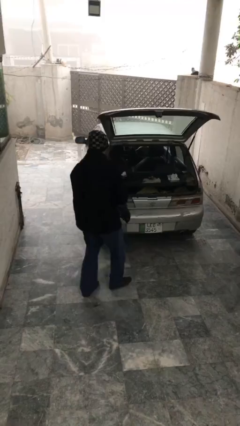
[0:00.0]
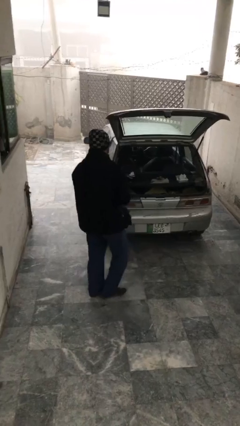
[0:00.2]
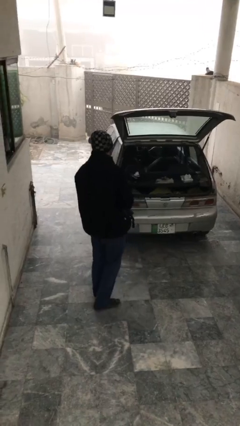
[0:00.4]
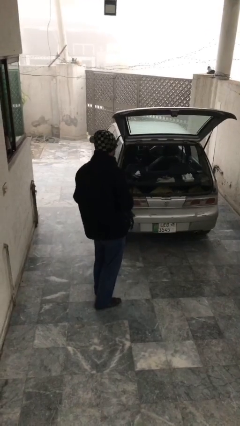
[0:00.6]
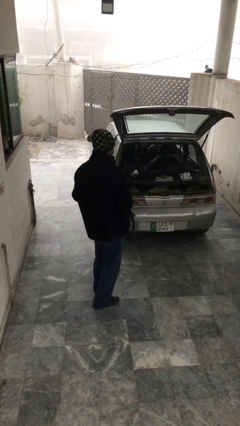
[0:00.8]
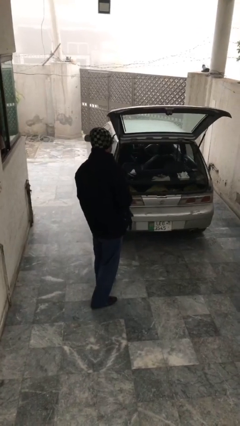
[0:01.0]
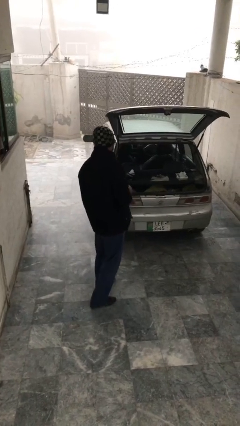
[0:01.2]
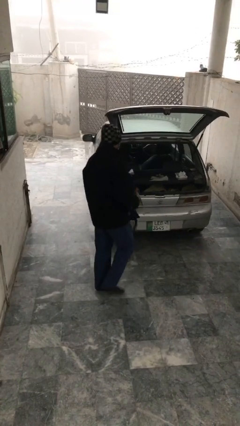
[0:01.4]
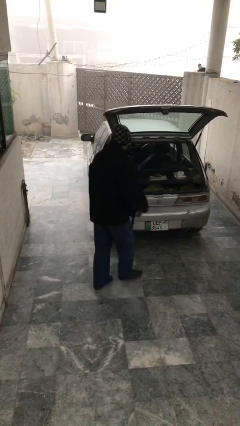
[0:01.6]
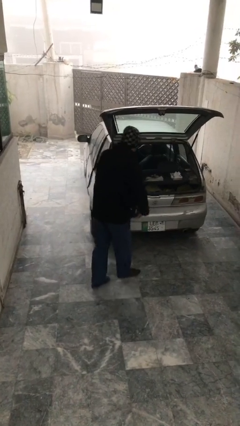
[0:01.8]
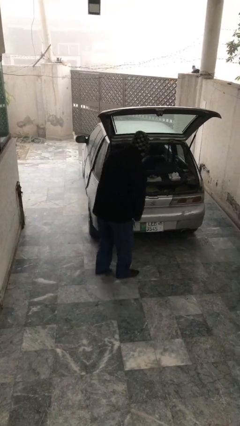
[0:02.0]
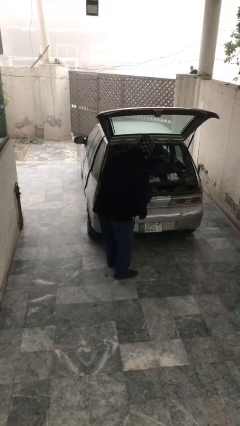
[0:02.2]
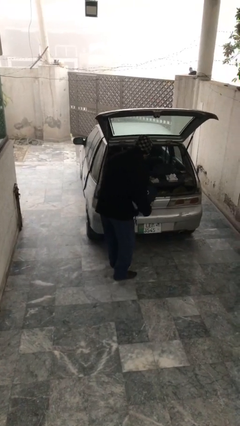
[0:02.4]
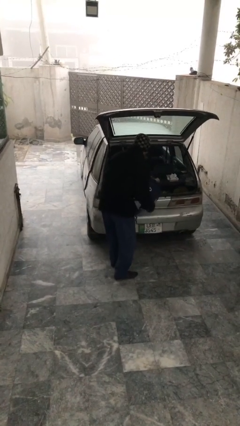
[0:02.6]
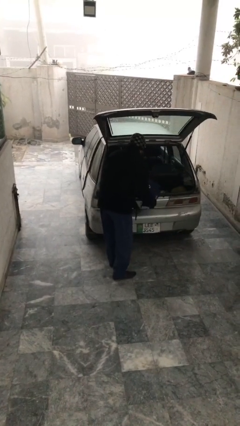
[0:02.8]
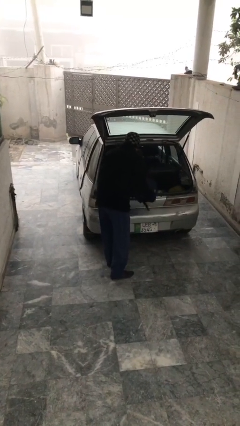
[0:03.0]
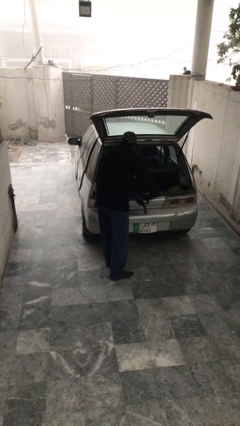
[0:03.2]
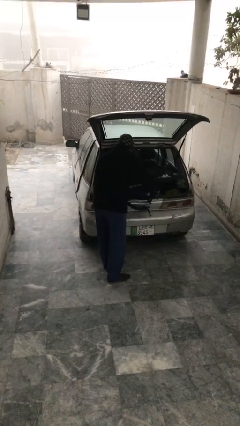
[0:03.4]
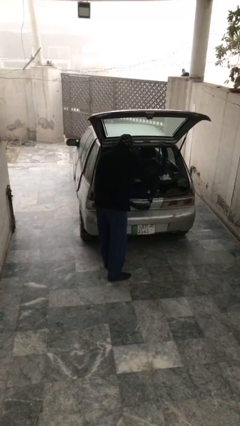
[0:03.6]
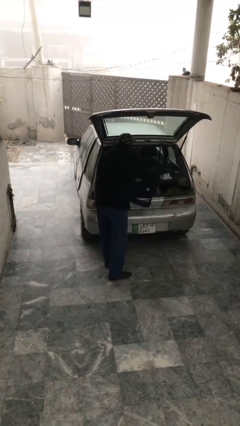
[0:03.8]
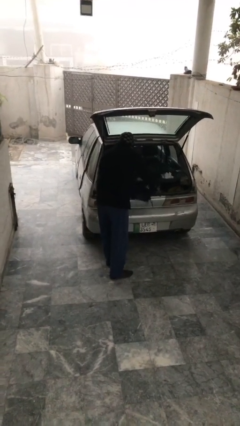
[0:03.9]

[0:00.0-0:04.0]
person loads car

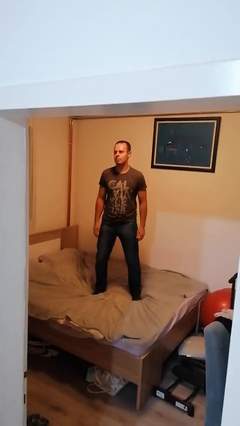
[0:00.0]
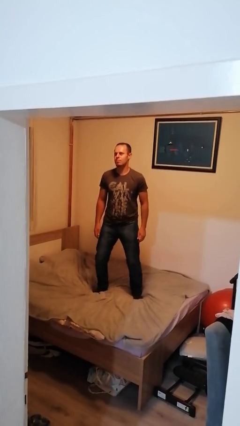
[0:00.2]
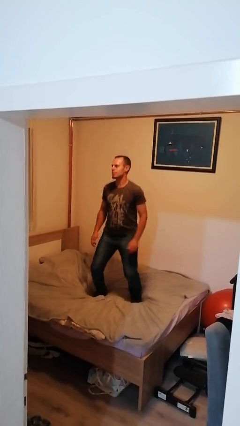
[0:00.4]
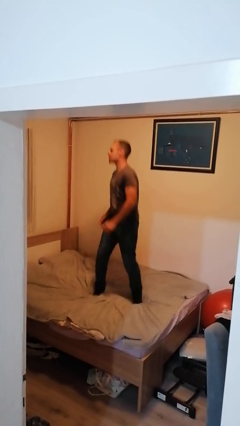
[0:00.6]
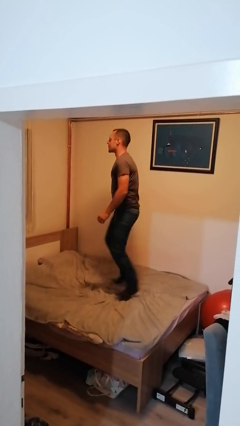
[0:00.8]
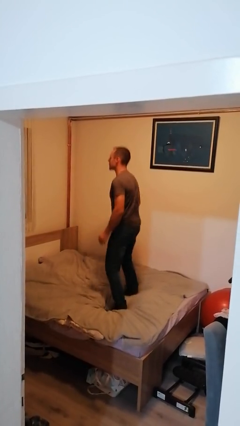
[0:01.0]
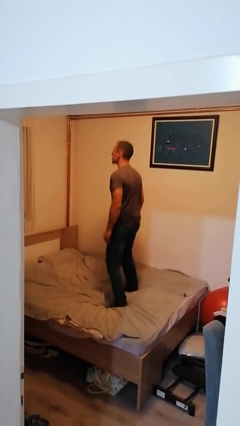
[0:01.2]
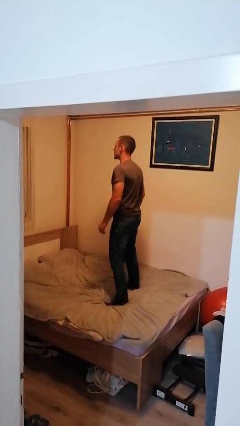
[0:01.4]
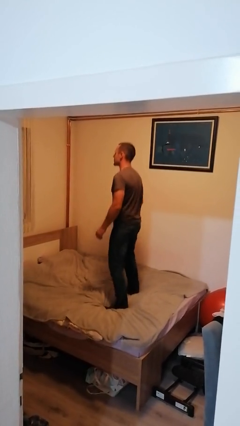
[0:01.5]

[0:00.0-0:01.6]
person jumps on bed

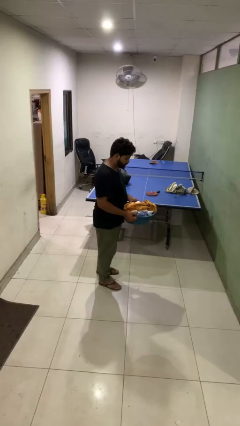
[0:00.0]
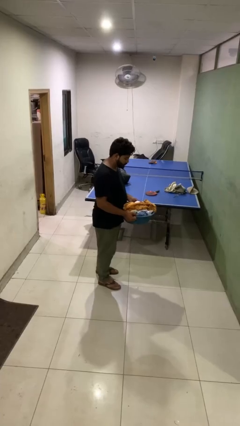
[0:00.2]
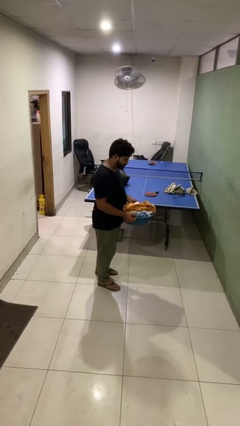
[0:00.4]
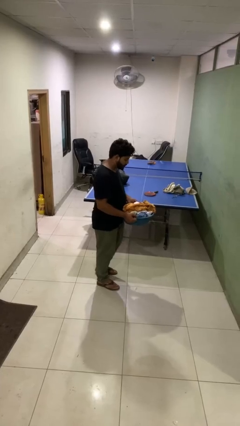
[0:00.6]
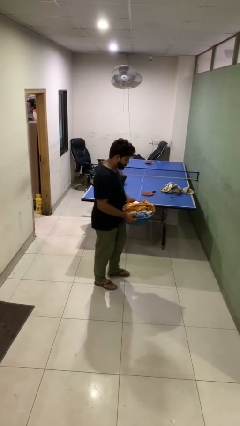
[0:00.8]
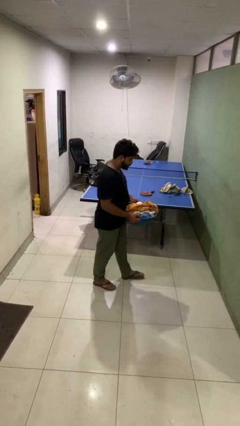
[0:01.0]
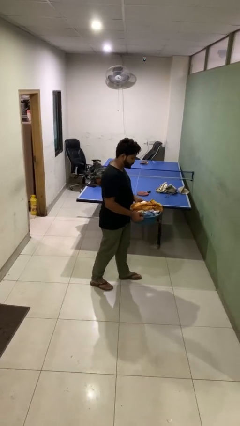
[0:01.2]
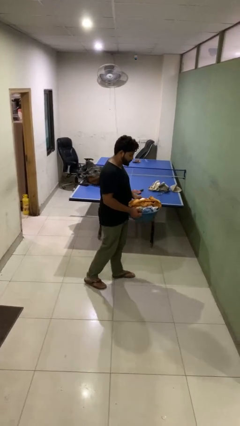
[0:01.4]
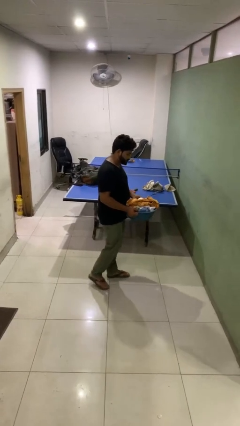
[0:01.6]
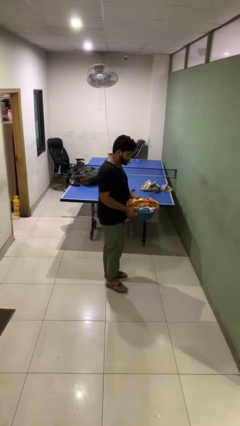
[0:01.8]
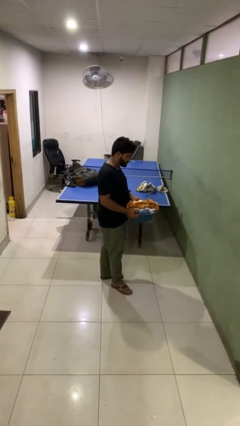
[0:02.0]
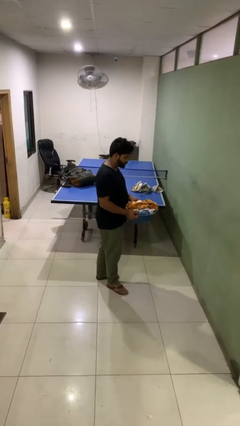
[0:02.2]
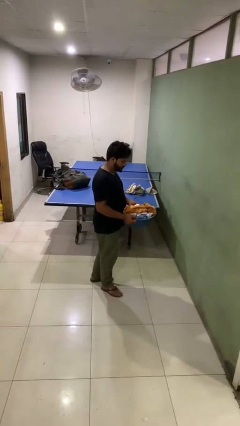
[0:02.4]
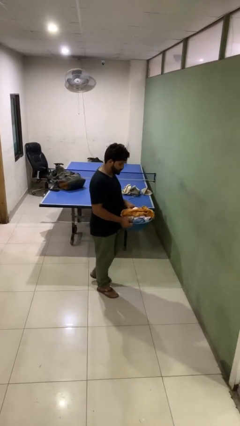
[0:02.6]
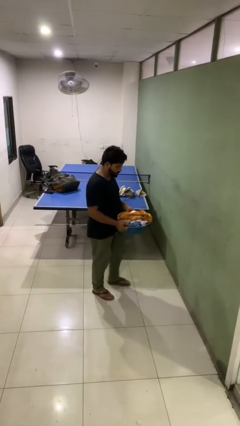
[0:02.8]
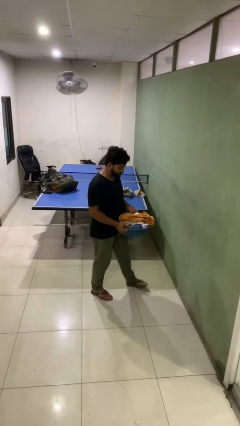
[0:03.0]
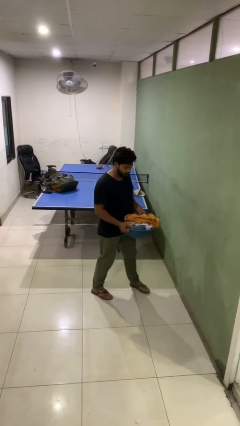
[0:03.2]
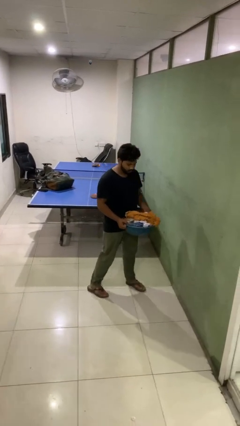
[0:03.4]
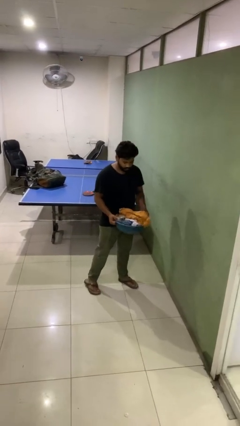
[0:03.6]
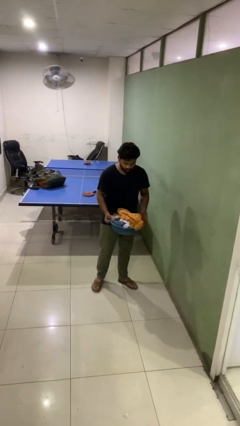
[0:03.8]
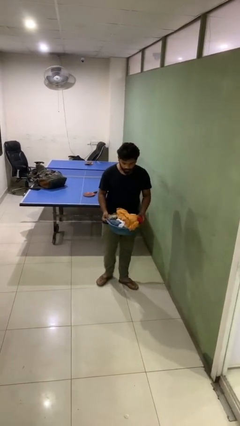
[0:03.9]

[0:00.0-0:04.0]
person carries laundry basket

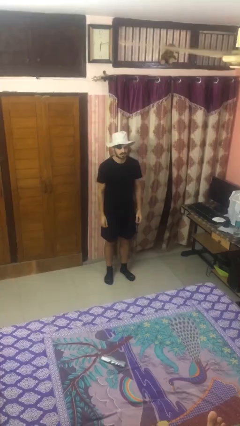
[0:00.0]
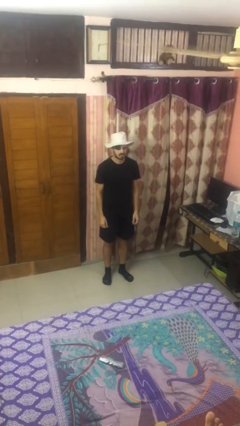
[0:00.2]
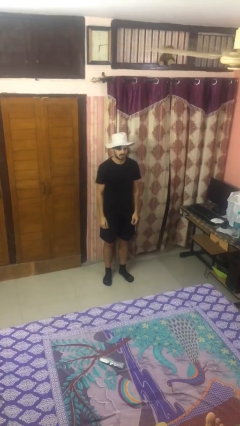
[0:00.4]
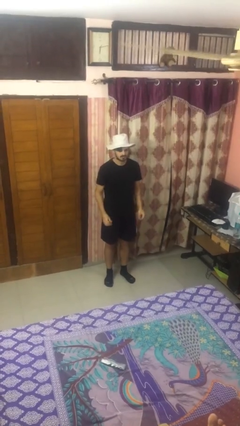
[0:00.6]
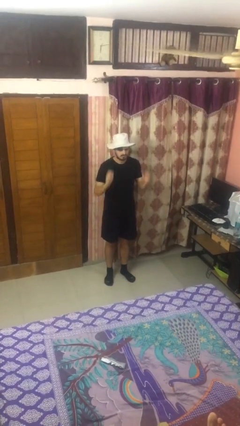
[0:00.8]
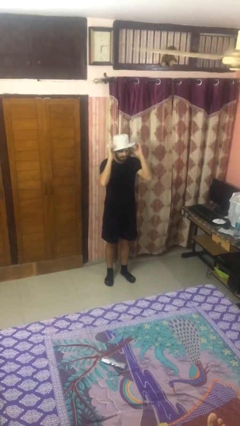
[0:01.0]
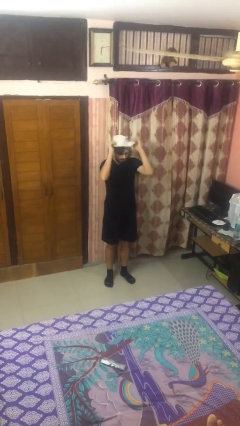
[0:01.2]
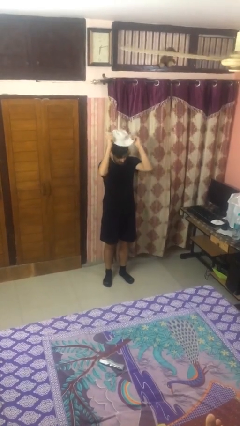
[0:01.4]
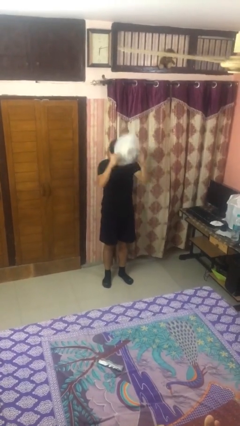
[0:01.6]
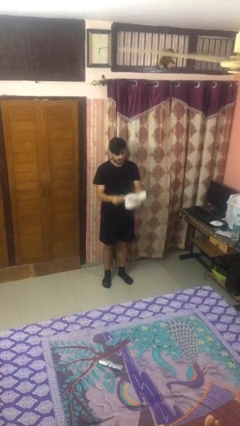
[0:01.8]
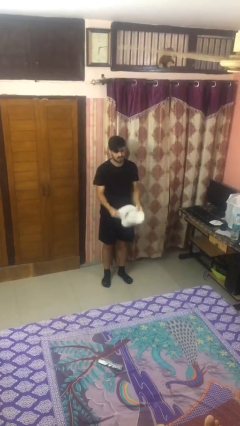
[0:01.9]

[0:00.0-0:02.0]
person takes off hat

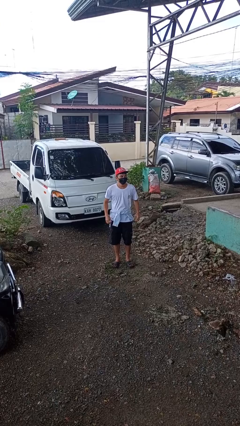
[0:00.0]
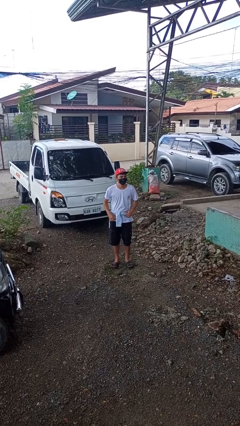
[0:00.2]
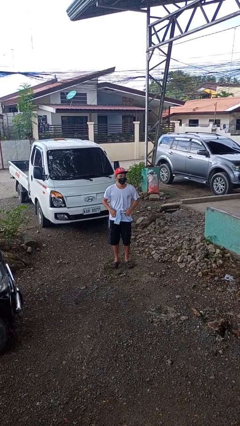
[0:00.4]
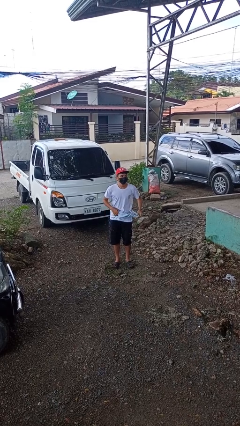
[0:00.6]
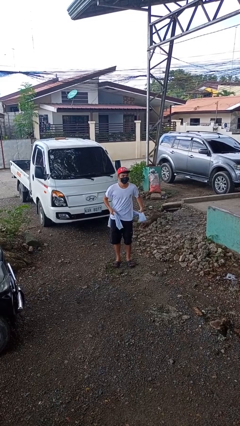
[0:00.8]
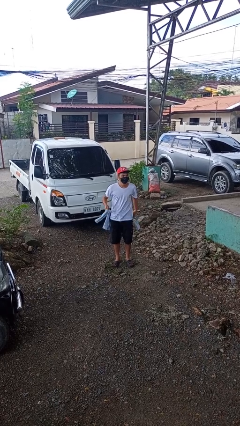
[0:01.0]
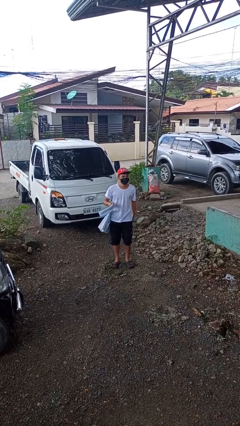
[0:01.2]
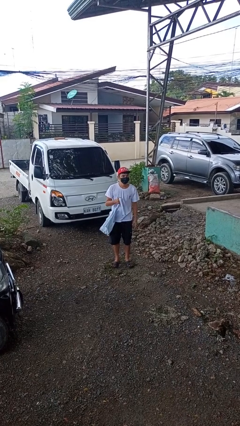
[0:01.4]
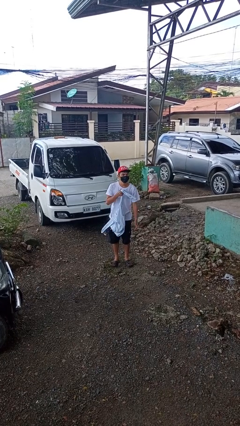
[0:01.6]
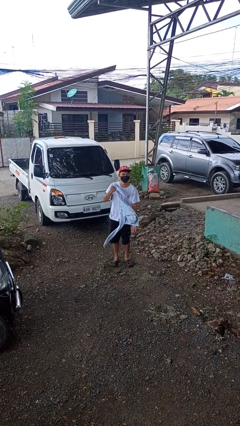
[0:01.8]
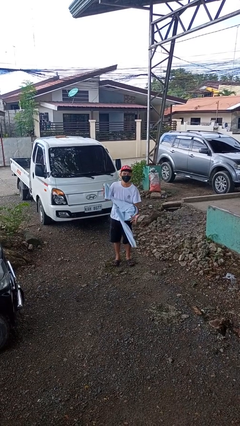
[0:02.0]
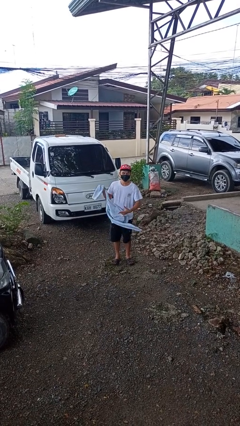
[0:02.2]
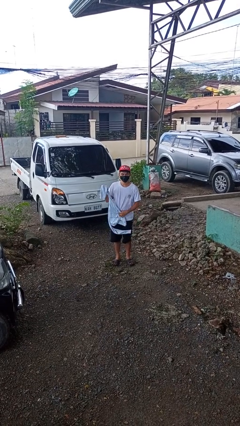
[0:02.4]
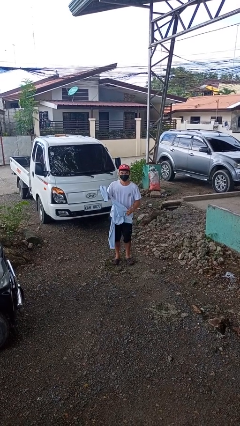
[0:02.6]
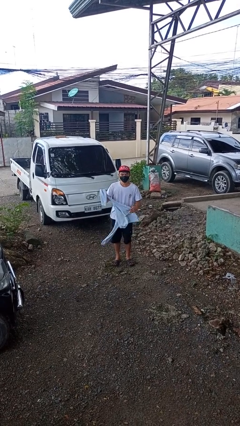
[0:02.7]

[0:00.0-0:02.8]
person unties jacket around waist

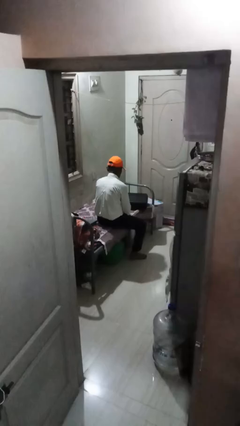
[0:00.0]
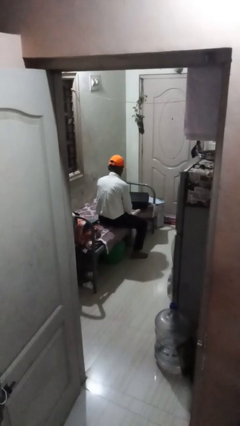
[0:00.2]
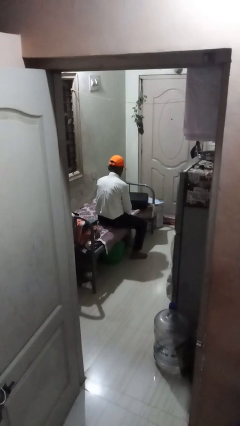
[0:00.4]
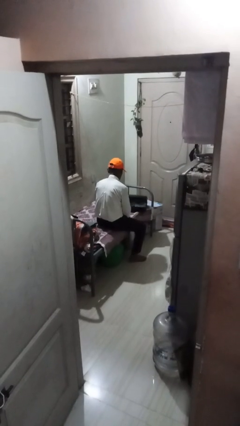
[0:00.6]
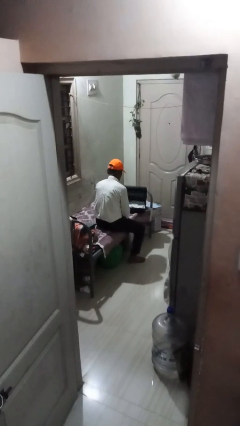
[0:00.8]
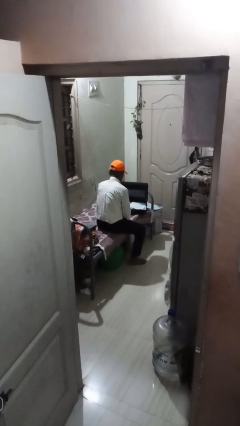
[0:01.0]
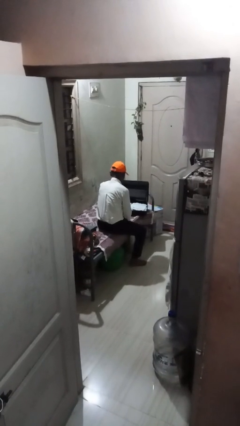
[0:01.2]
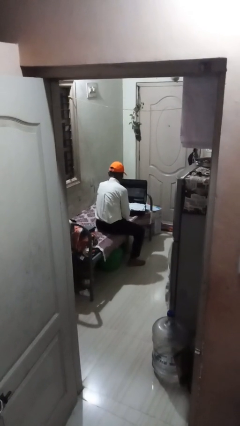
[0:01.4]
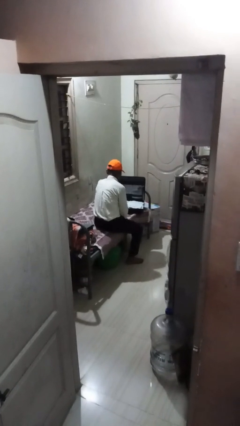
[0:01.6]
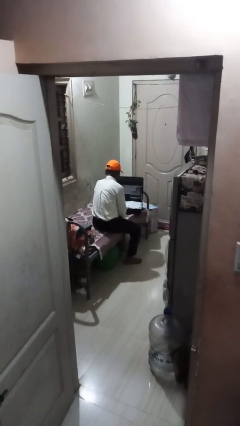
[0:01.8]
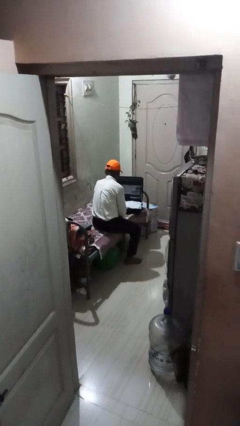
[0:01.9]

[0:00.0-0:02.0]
person opens suitcase

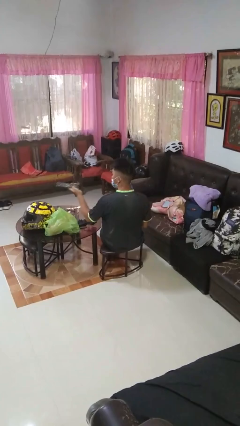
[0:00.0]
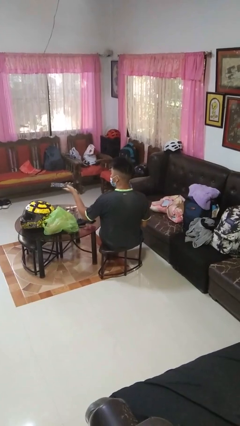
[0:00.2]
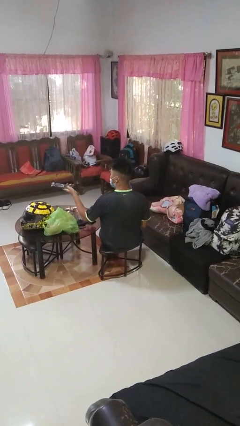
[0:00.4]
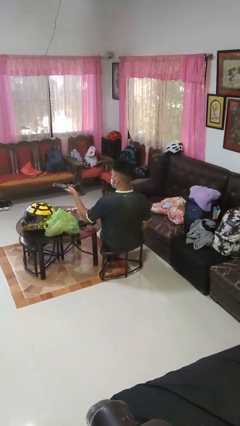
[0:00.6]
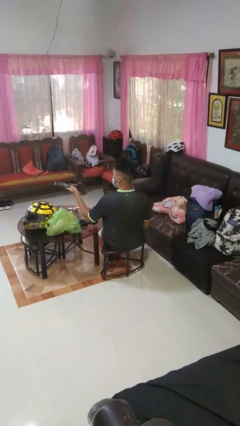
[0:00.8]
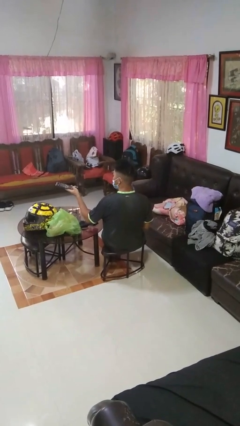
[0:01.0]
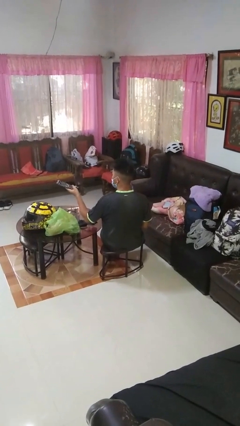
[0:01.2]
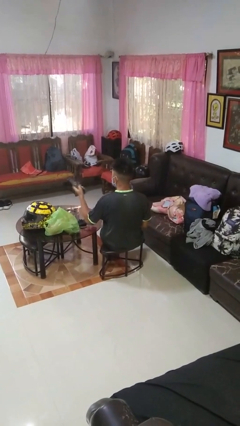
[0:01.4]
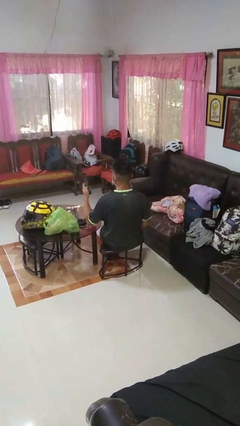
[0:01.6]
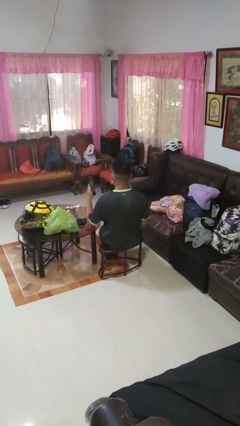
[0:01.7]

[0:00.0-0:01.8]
person uses television remote
